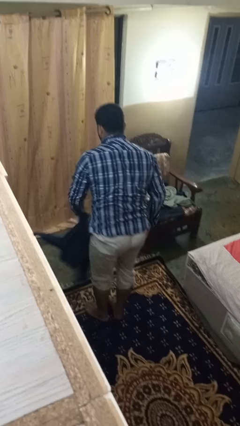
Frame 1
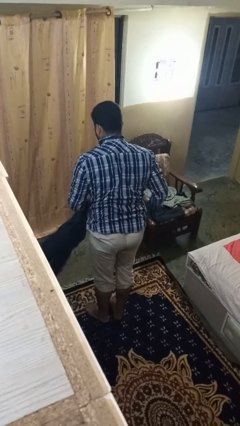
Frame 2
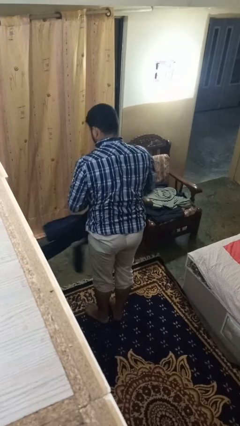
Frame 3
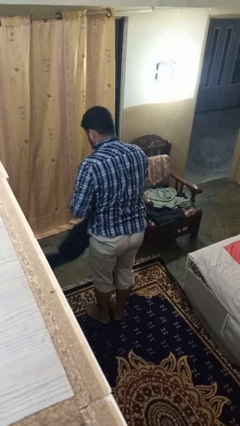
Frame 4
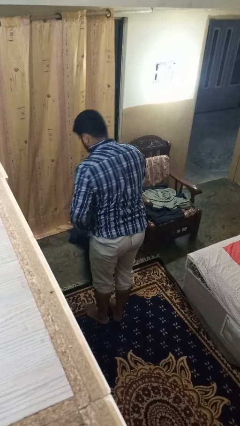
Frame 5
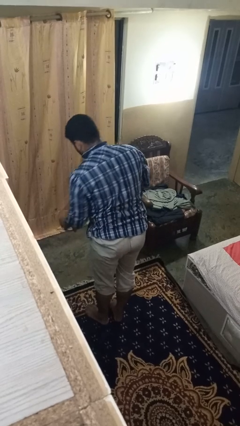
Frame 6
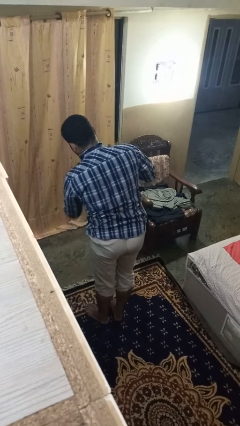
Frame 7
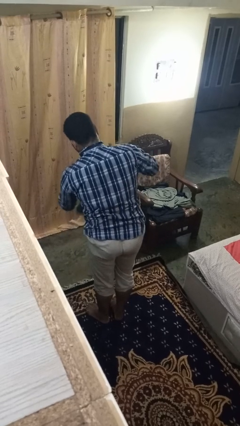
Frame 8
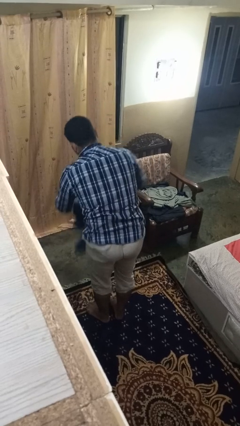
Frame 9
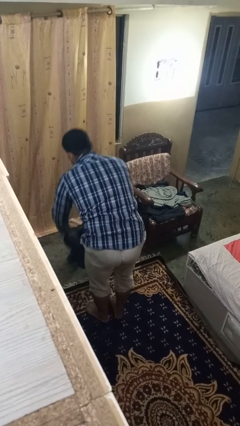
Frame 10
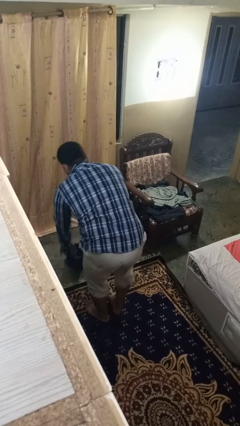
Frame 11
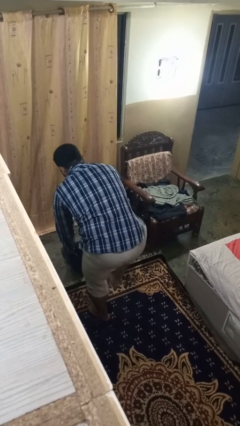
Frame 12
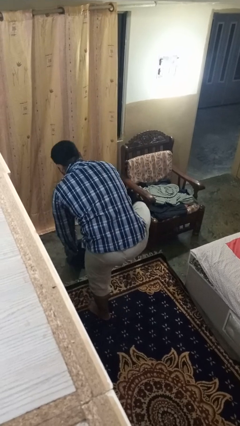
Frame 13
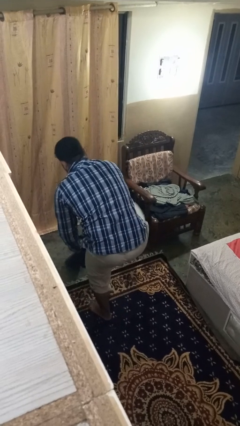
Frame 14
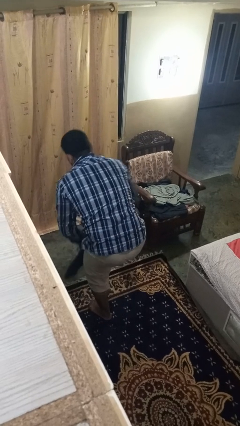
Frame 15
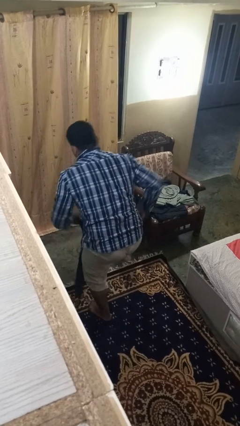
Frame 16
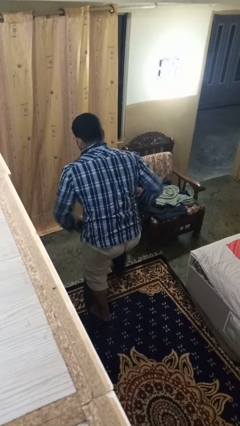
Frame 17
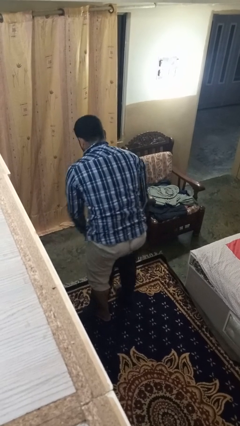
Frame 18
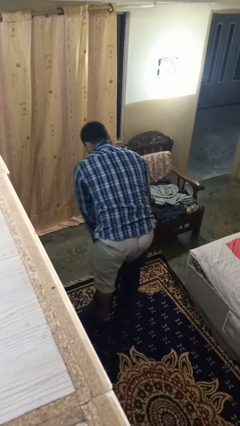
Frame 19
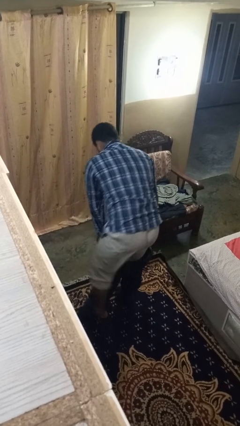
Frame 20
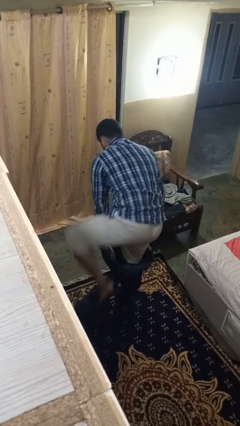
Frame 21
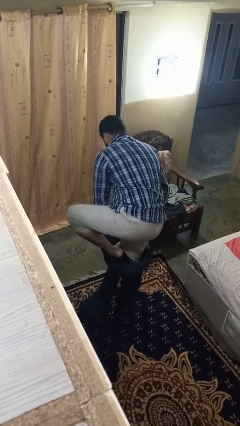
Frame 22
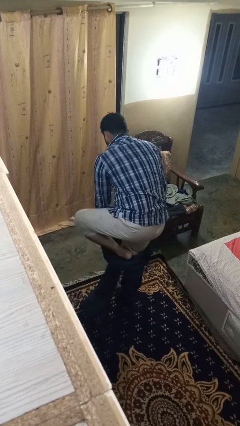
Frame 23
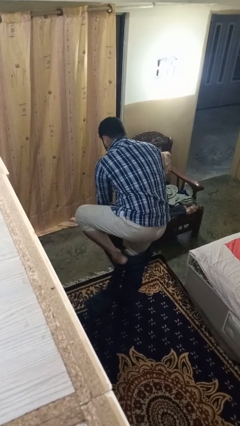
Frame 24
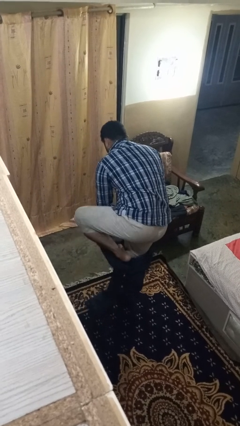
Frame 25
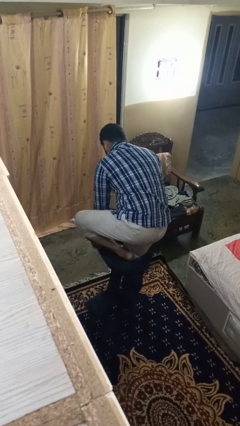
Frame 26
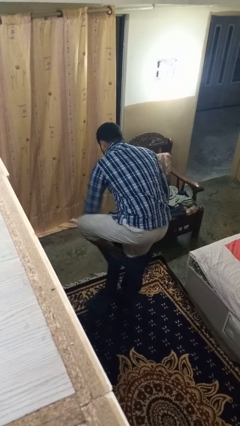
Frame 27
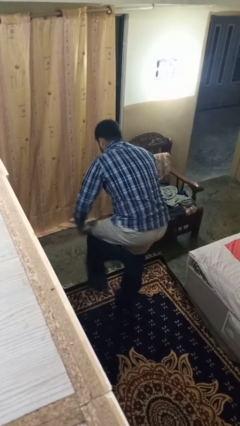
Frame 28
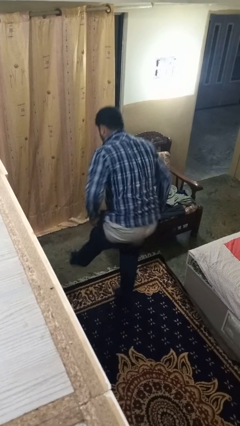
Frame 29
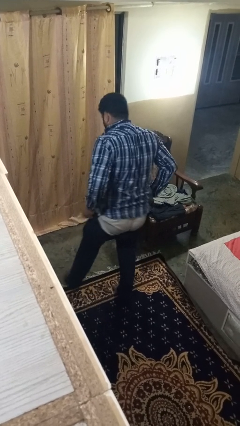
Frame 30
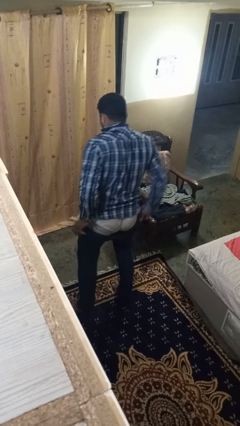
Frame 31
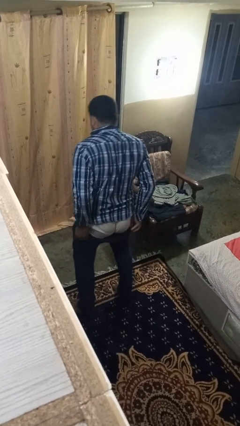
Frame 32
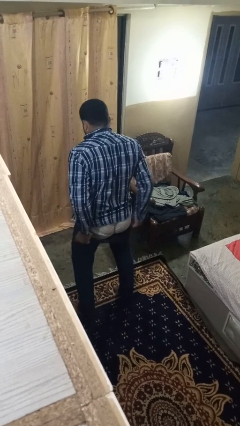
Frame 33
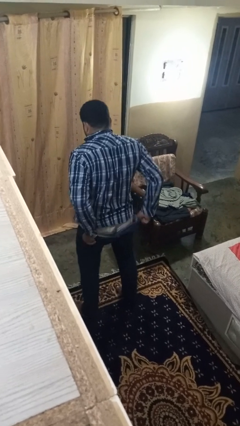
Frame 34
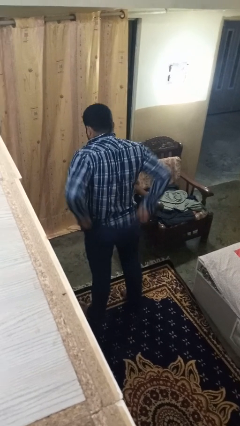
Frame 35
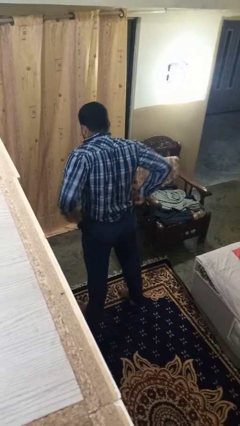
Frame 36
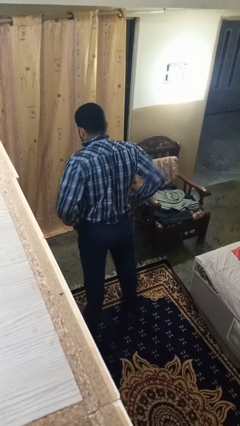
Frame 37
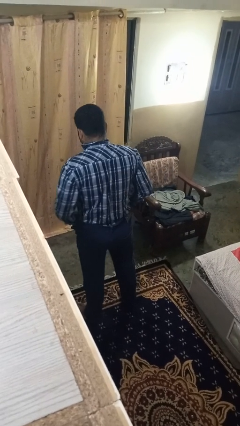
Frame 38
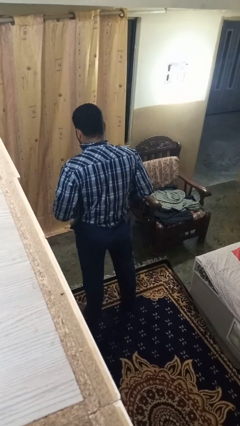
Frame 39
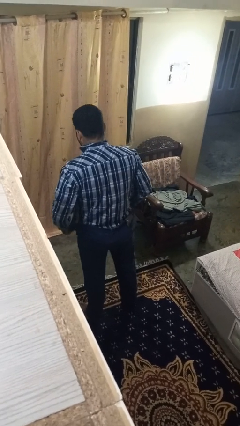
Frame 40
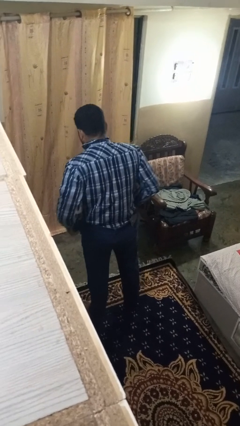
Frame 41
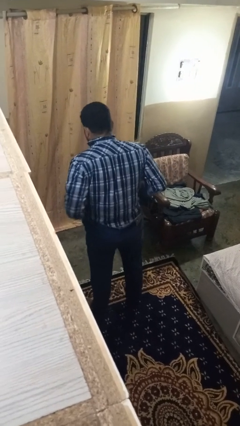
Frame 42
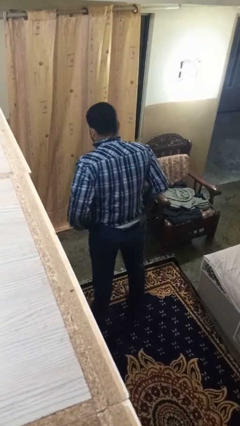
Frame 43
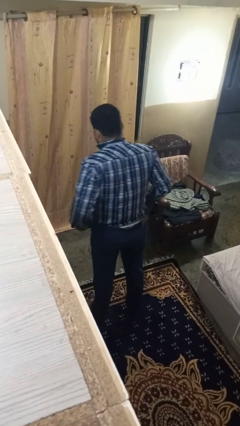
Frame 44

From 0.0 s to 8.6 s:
person puts on pants

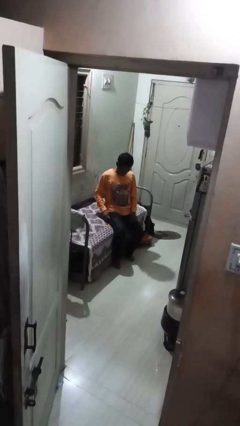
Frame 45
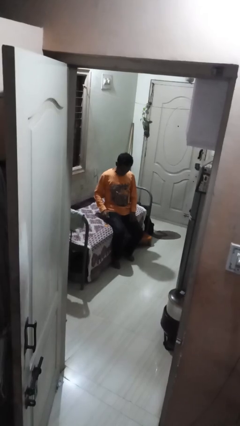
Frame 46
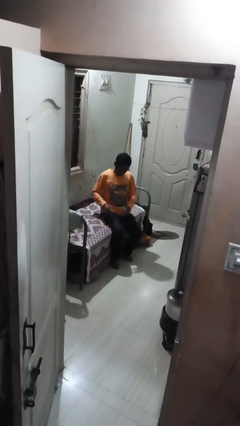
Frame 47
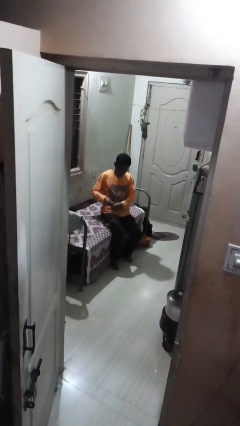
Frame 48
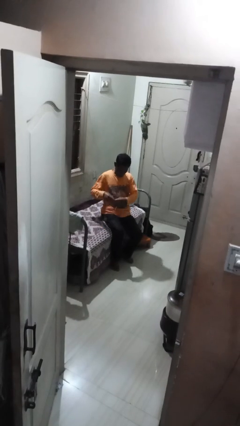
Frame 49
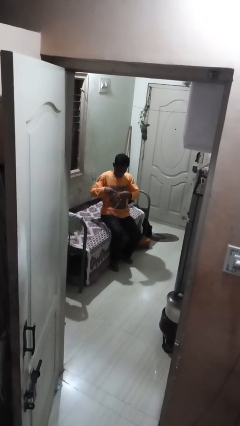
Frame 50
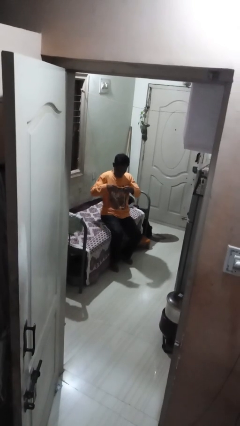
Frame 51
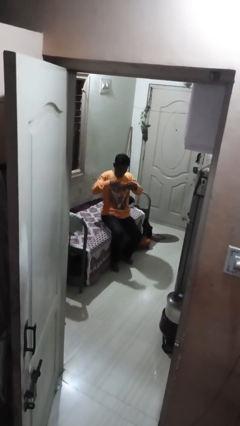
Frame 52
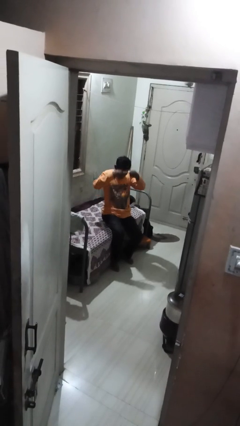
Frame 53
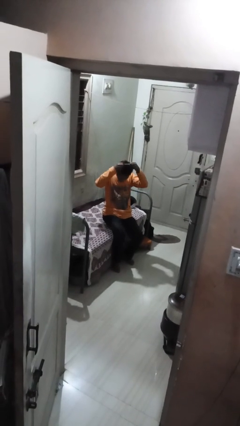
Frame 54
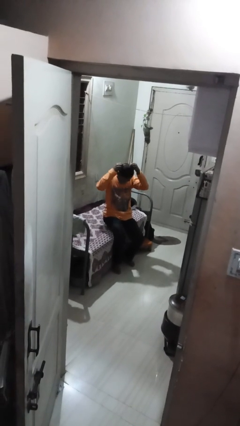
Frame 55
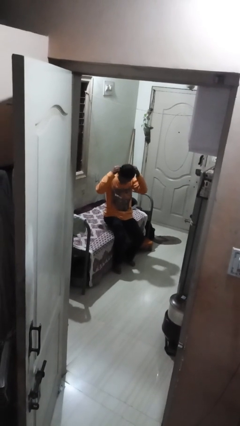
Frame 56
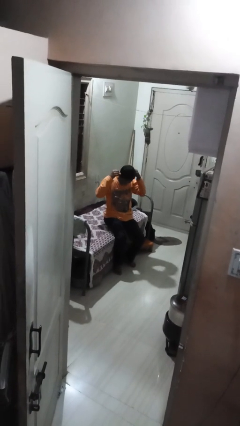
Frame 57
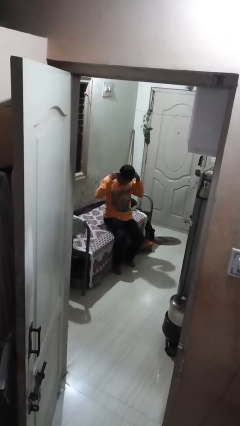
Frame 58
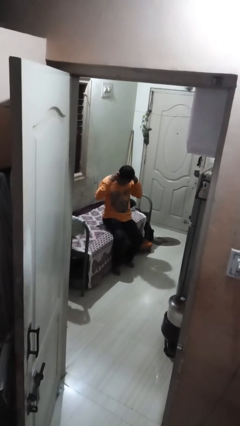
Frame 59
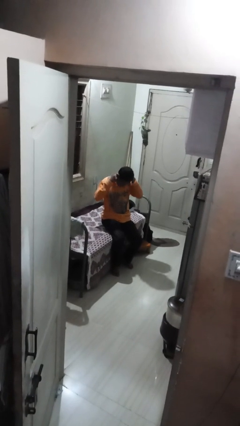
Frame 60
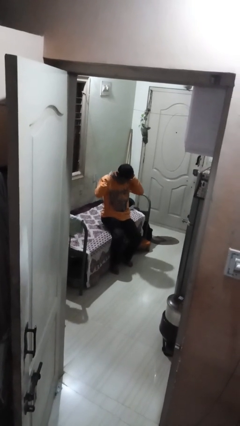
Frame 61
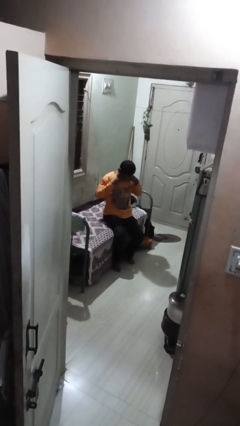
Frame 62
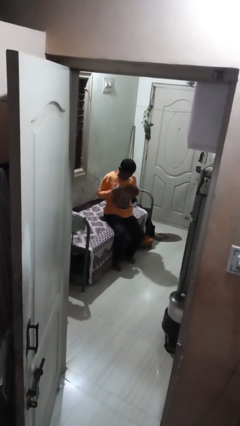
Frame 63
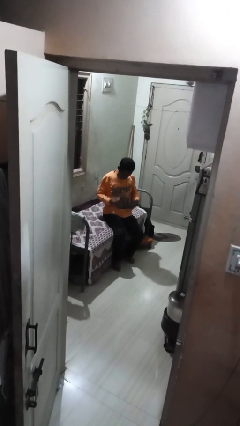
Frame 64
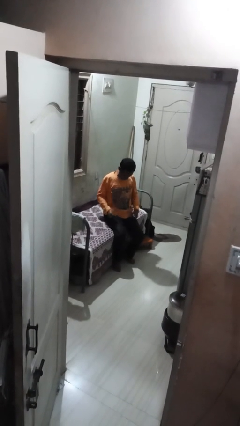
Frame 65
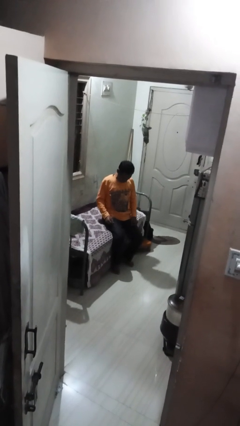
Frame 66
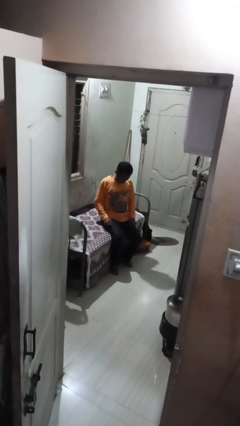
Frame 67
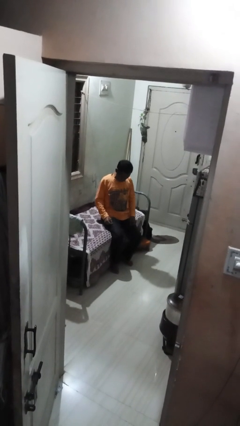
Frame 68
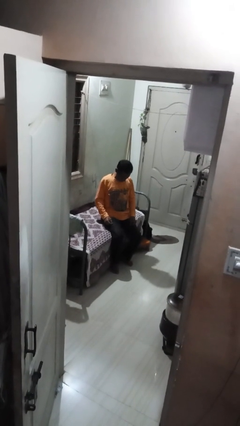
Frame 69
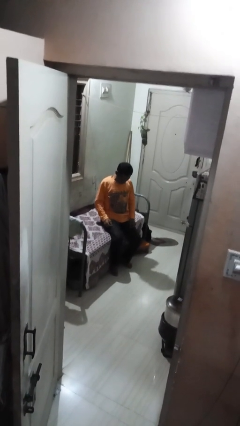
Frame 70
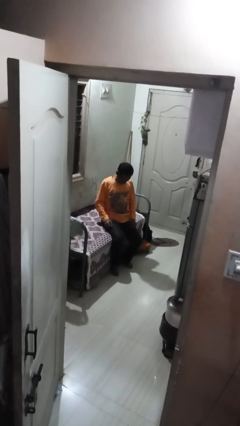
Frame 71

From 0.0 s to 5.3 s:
person puts on necklace

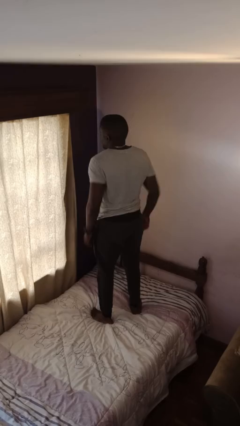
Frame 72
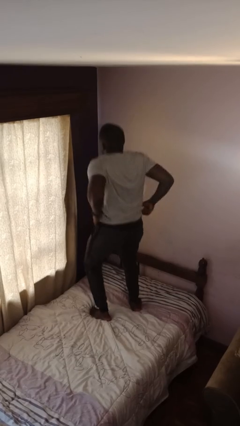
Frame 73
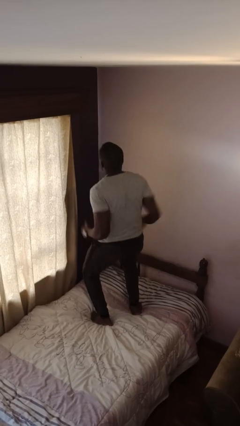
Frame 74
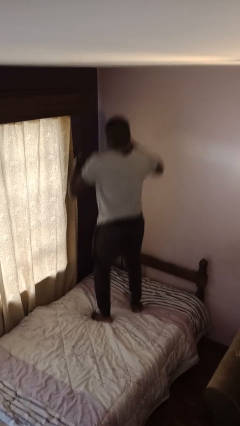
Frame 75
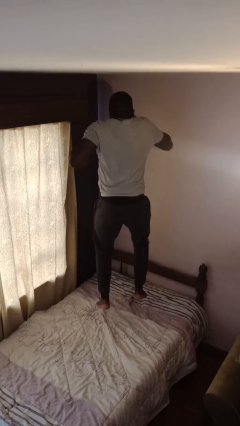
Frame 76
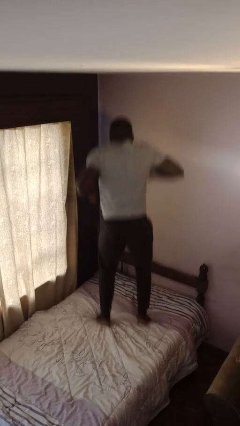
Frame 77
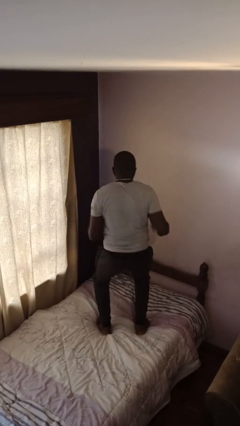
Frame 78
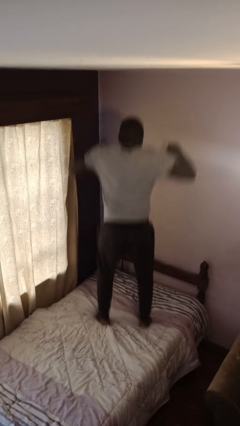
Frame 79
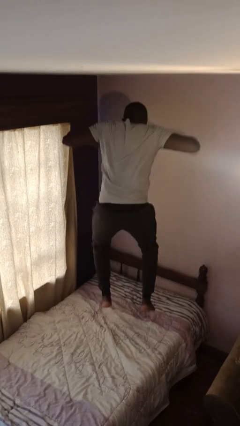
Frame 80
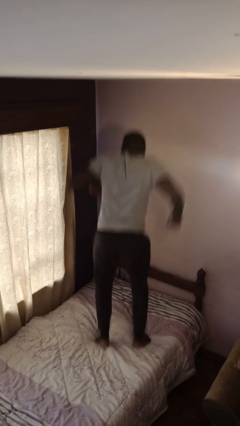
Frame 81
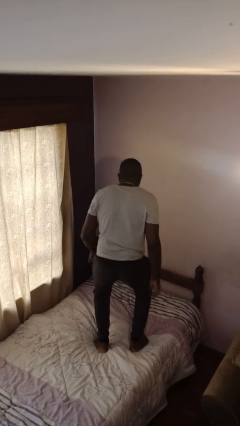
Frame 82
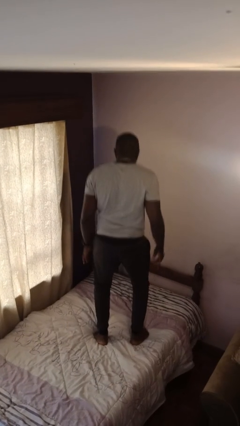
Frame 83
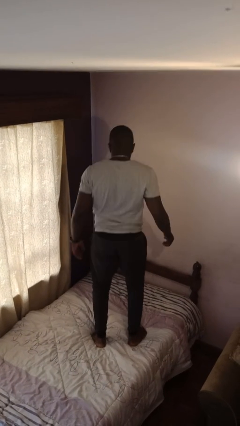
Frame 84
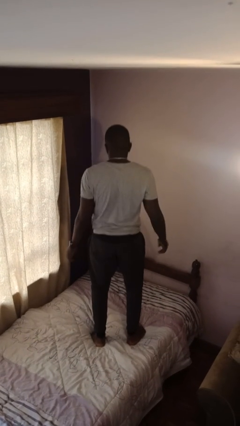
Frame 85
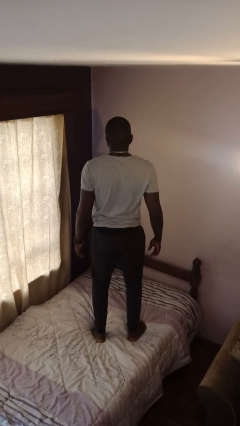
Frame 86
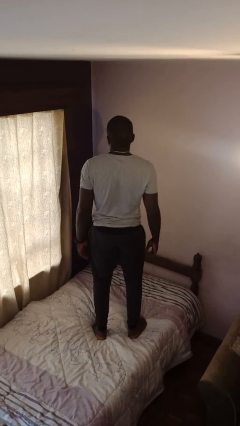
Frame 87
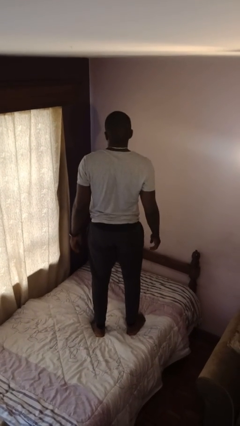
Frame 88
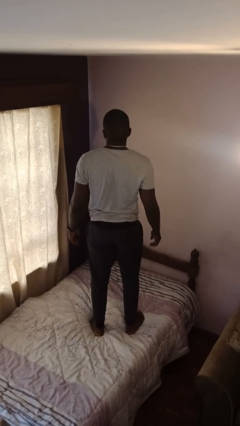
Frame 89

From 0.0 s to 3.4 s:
person jumps on bed

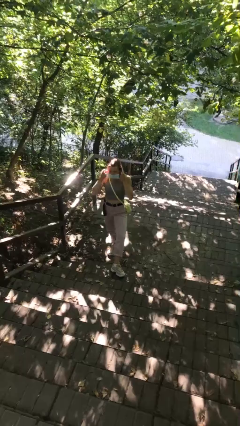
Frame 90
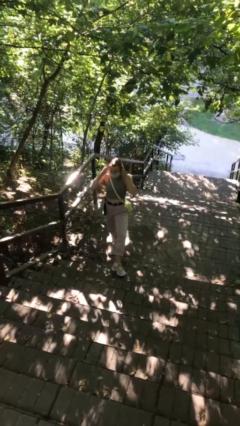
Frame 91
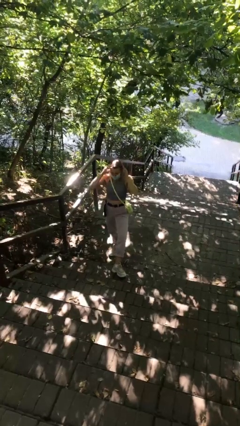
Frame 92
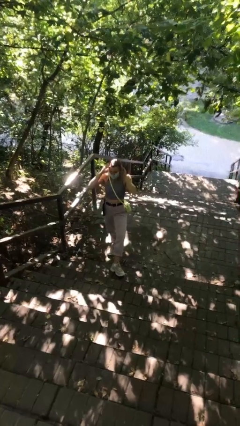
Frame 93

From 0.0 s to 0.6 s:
person puts on facemask

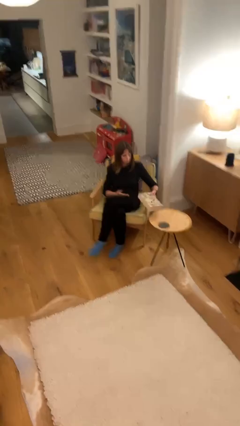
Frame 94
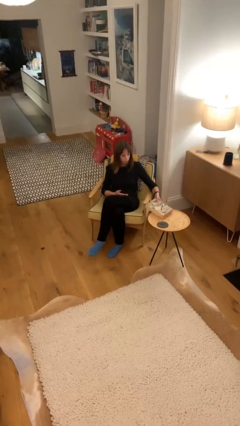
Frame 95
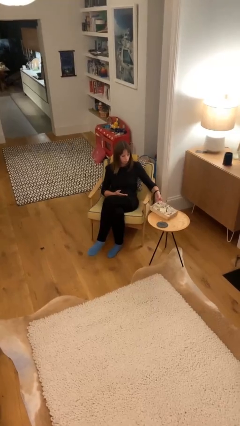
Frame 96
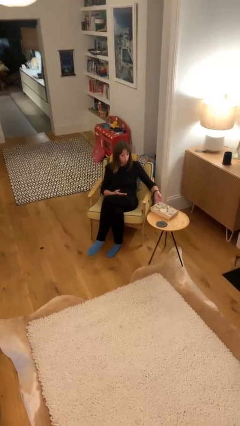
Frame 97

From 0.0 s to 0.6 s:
person puts down object on table
